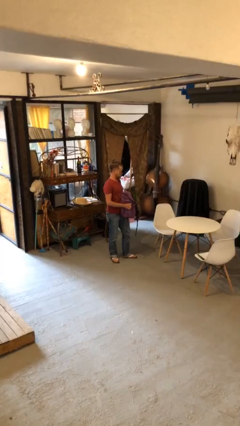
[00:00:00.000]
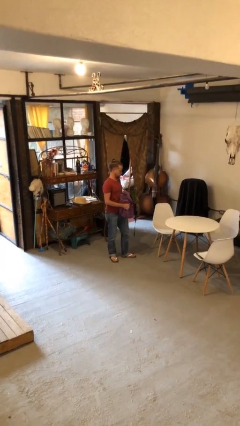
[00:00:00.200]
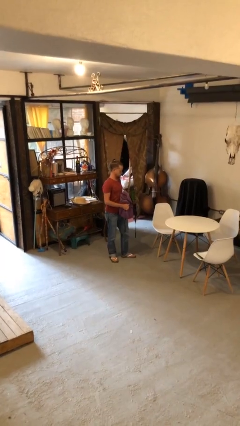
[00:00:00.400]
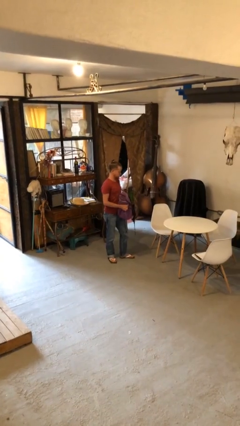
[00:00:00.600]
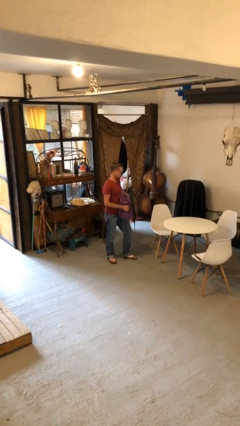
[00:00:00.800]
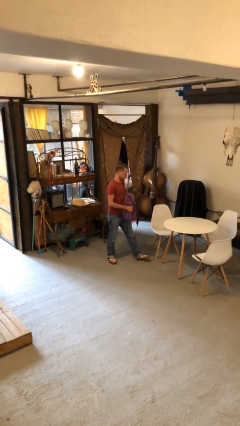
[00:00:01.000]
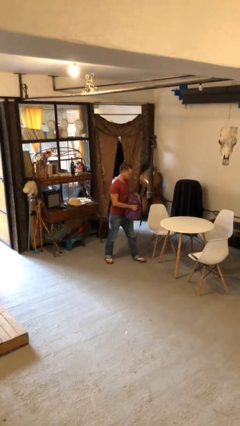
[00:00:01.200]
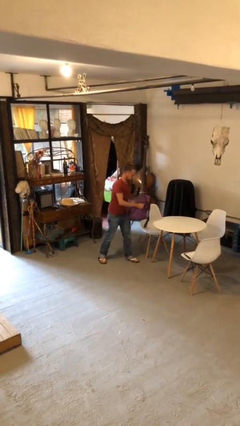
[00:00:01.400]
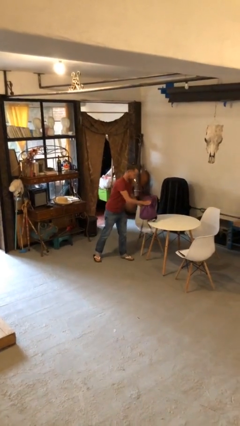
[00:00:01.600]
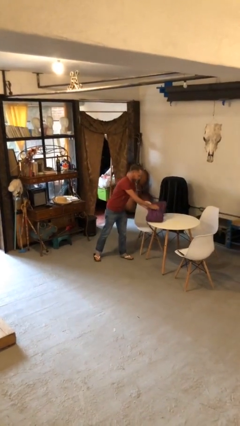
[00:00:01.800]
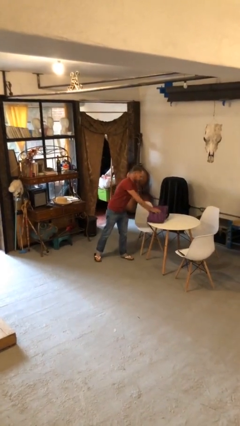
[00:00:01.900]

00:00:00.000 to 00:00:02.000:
person puts down object on table

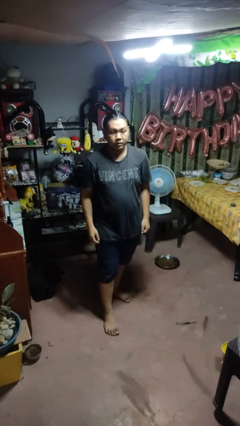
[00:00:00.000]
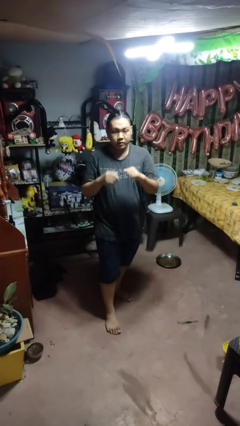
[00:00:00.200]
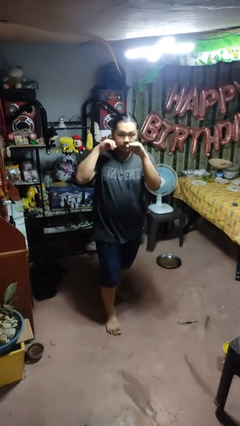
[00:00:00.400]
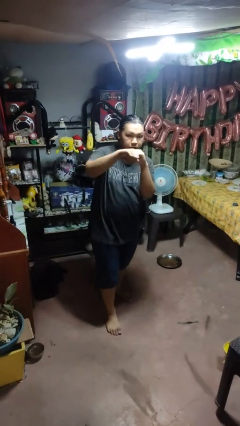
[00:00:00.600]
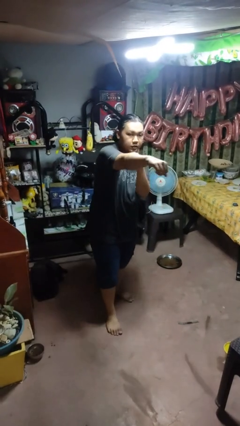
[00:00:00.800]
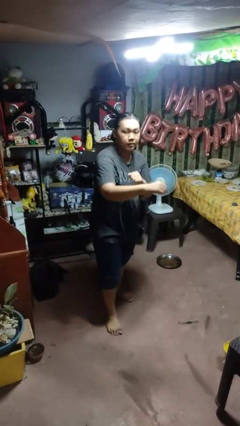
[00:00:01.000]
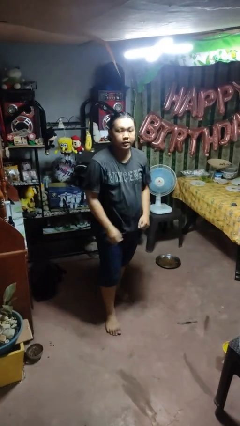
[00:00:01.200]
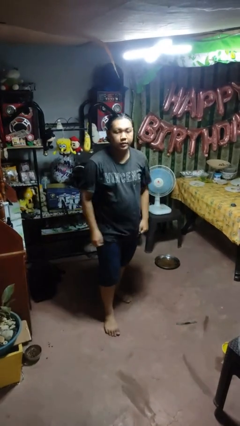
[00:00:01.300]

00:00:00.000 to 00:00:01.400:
person punches

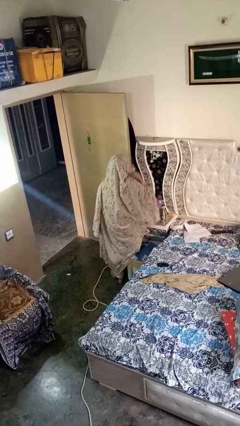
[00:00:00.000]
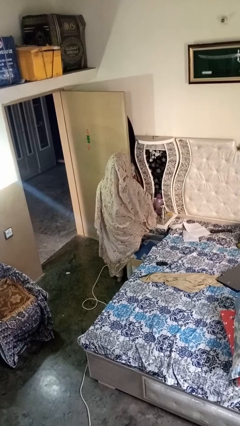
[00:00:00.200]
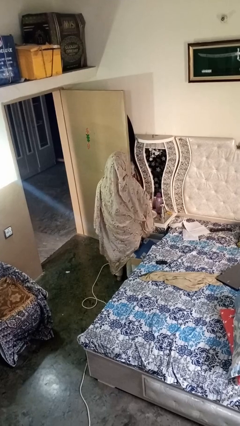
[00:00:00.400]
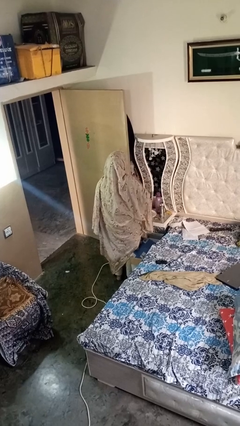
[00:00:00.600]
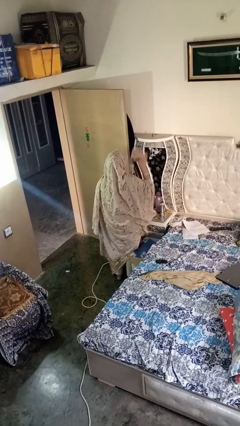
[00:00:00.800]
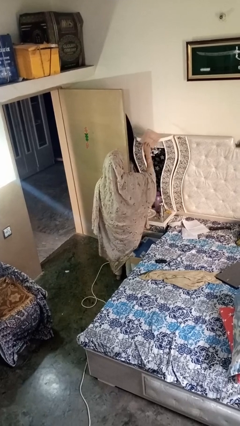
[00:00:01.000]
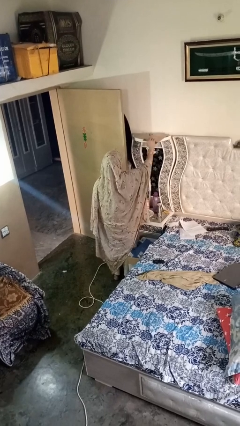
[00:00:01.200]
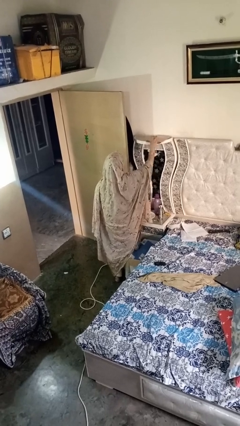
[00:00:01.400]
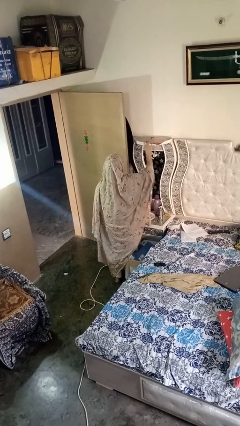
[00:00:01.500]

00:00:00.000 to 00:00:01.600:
person puts down object on shelf

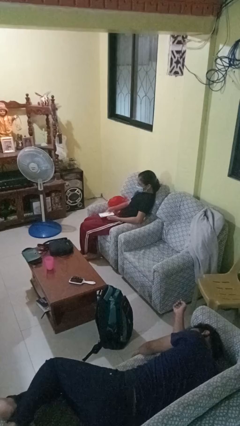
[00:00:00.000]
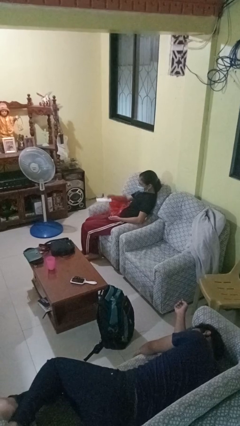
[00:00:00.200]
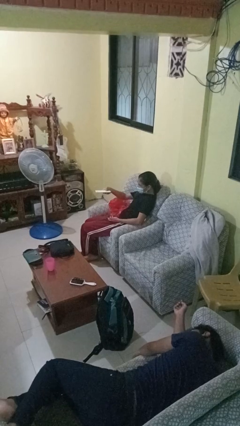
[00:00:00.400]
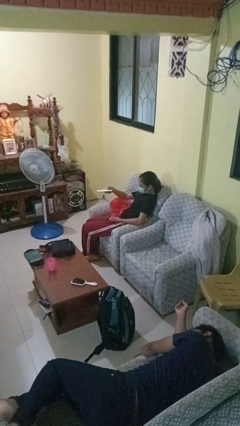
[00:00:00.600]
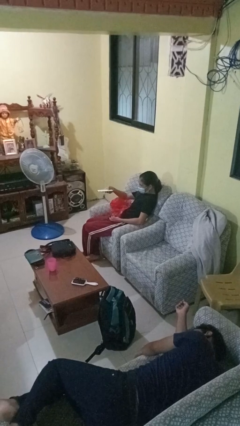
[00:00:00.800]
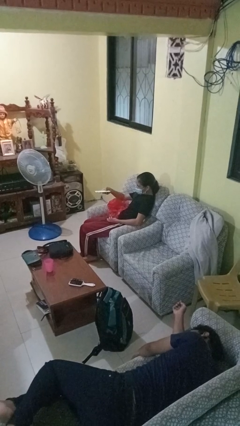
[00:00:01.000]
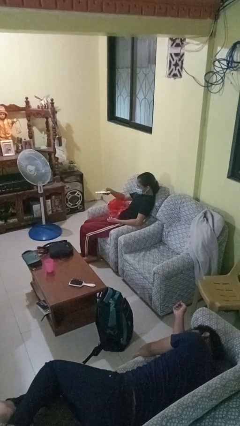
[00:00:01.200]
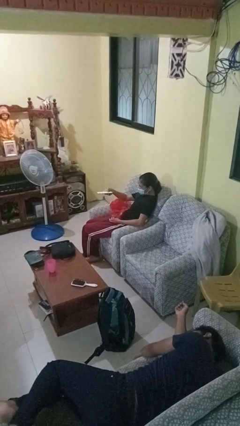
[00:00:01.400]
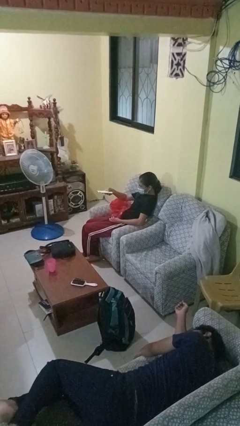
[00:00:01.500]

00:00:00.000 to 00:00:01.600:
person uses television remote

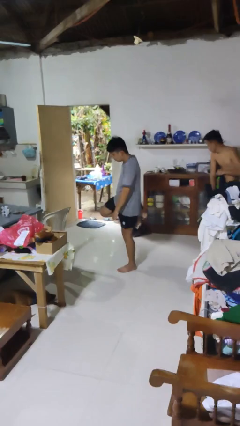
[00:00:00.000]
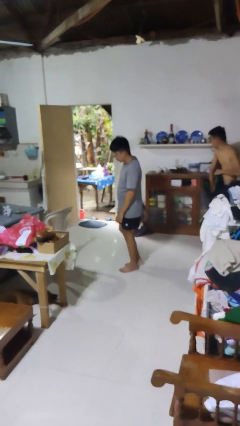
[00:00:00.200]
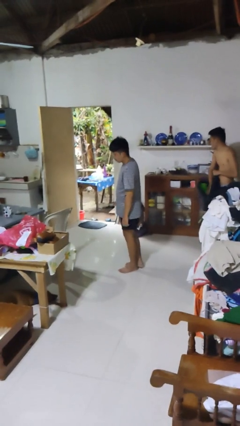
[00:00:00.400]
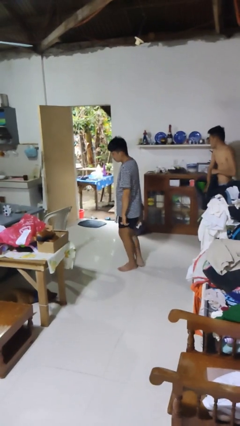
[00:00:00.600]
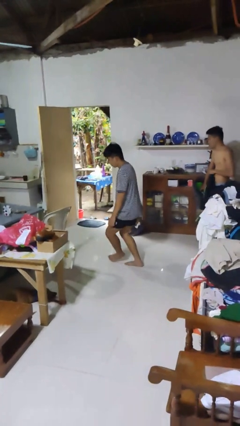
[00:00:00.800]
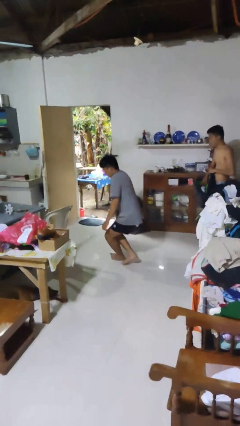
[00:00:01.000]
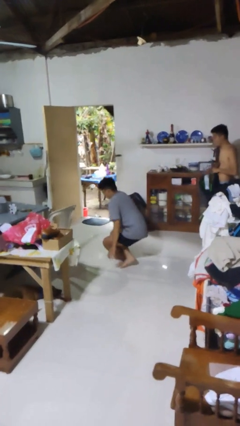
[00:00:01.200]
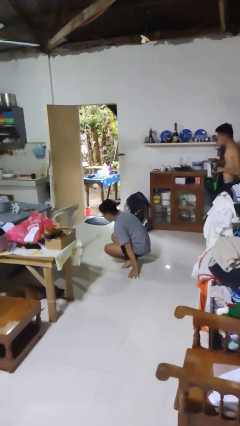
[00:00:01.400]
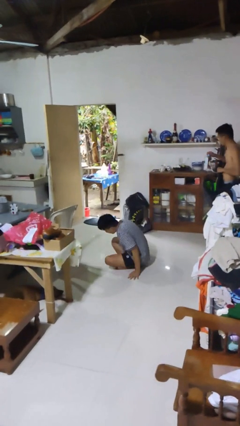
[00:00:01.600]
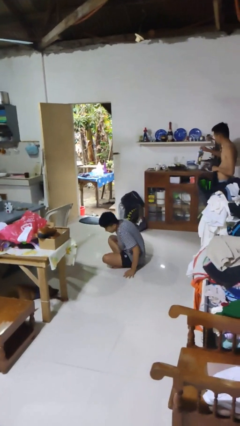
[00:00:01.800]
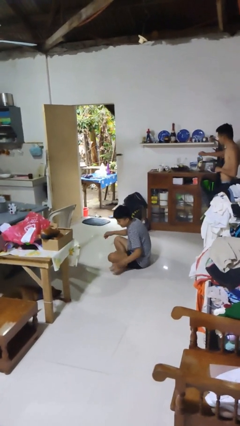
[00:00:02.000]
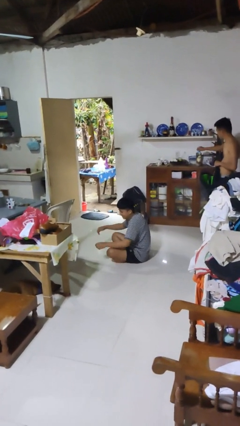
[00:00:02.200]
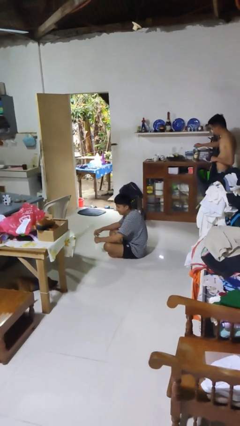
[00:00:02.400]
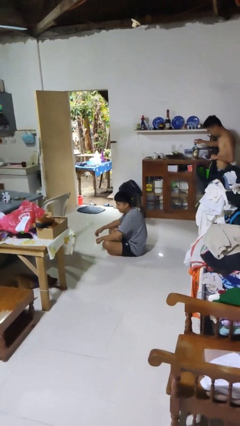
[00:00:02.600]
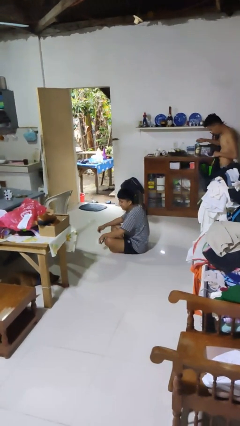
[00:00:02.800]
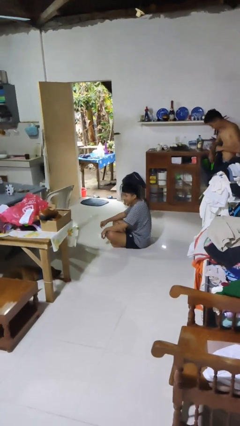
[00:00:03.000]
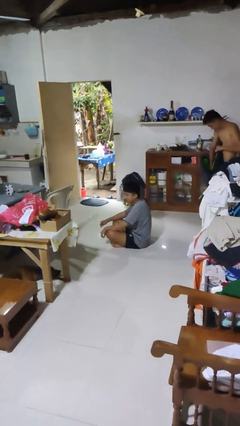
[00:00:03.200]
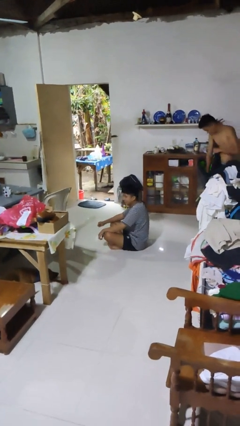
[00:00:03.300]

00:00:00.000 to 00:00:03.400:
person sits crisscross

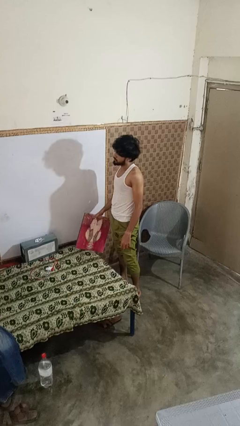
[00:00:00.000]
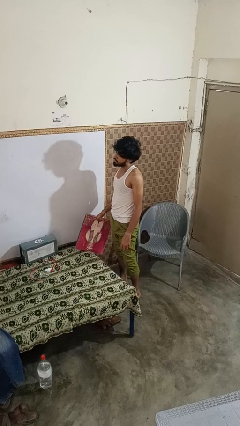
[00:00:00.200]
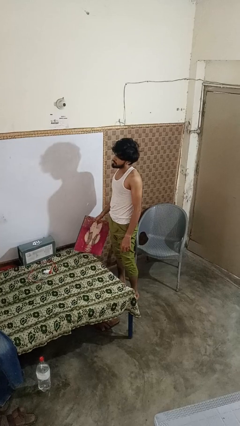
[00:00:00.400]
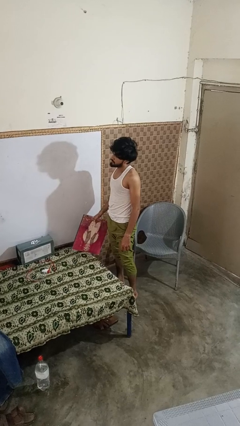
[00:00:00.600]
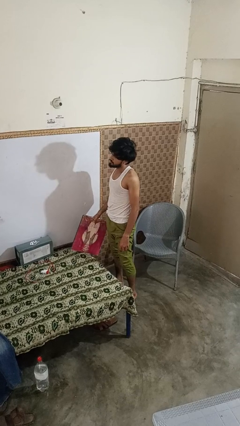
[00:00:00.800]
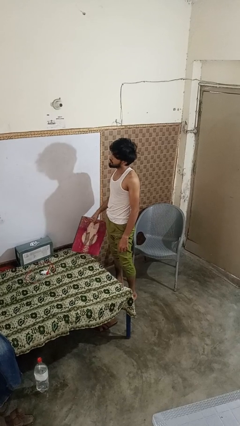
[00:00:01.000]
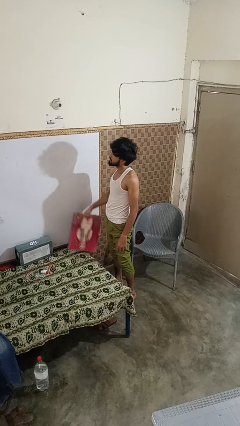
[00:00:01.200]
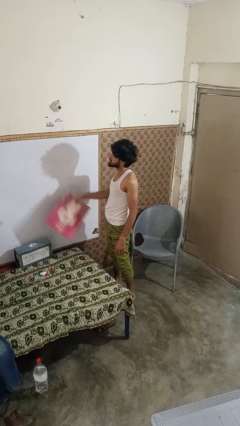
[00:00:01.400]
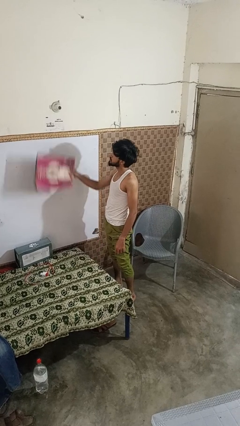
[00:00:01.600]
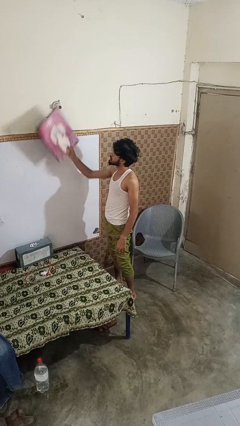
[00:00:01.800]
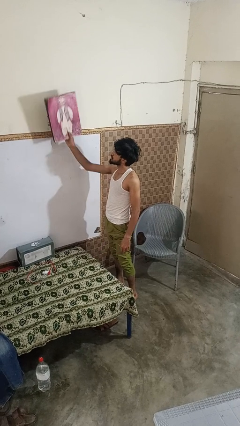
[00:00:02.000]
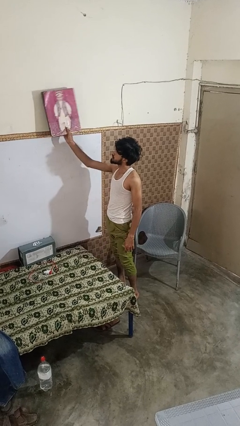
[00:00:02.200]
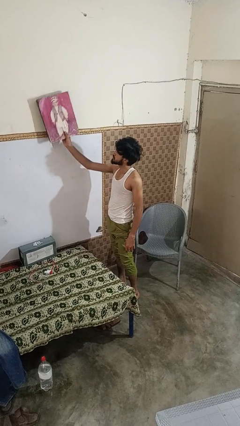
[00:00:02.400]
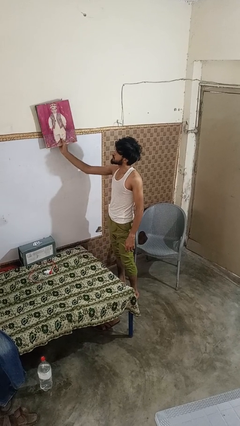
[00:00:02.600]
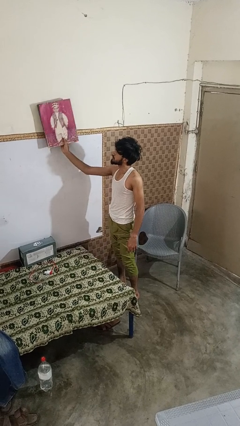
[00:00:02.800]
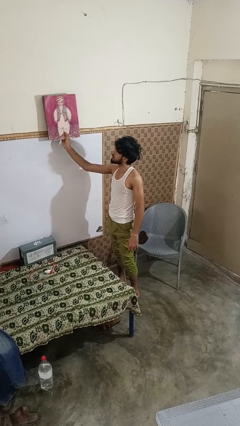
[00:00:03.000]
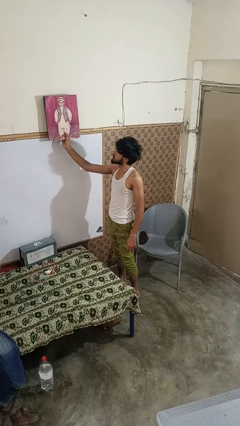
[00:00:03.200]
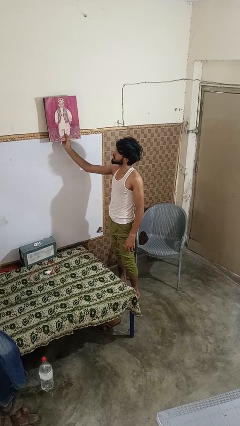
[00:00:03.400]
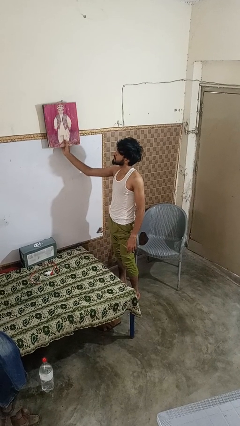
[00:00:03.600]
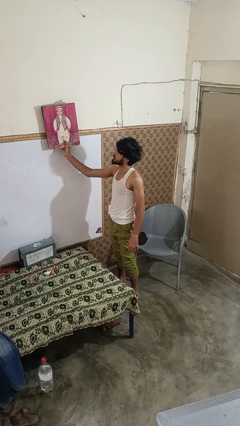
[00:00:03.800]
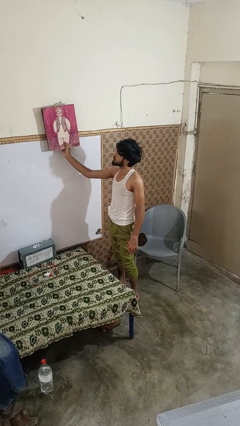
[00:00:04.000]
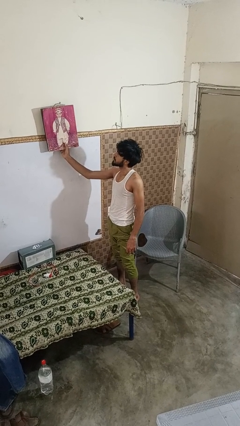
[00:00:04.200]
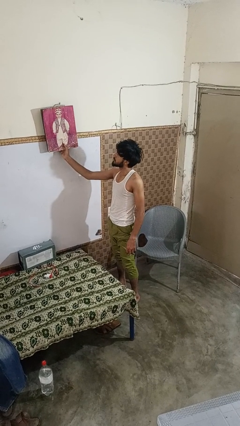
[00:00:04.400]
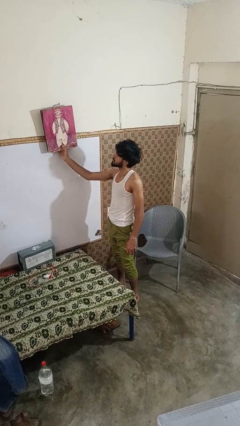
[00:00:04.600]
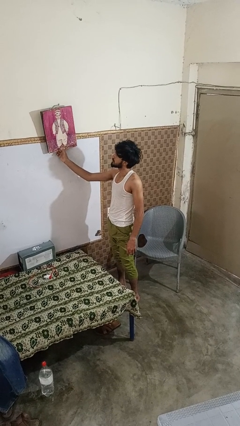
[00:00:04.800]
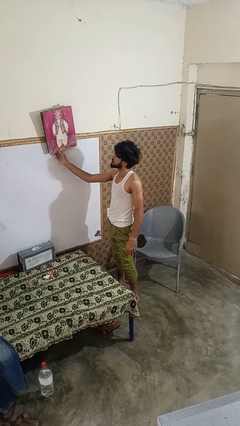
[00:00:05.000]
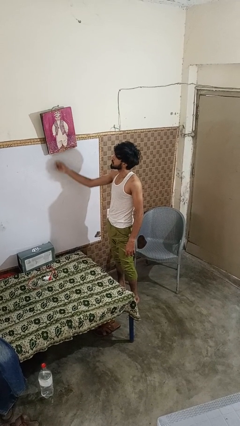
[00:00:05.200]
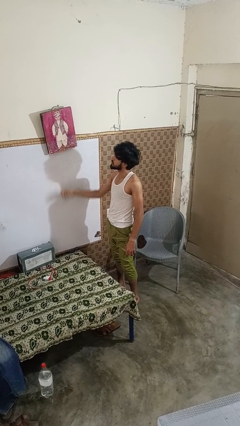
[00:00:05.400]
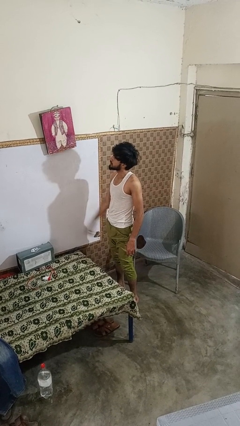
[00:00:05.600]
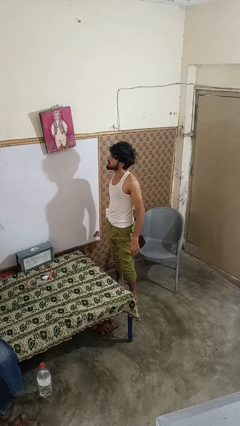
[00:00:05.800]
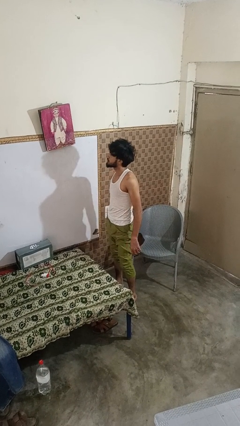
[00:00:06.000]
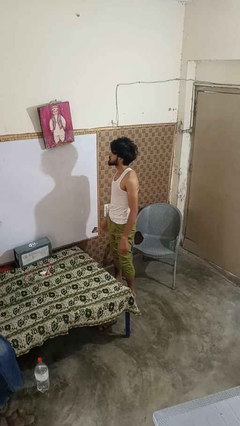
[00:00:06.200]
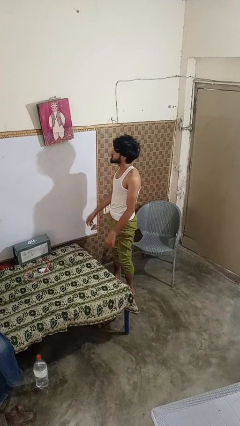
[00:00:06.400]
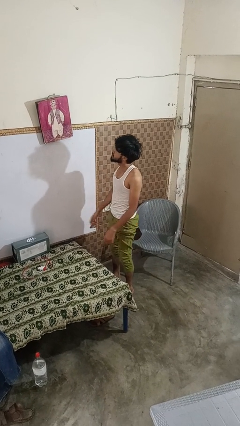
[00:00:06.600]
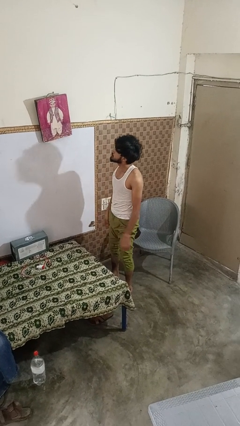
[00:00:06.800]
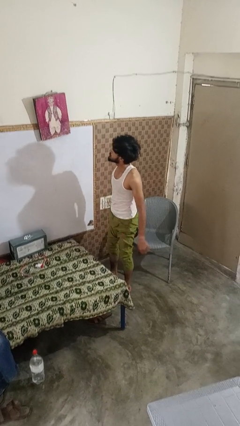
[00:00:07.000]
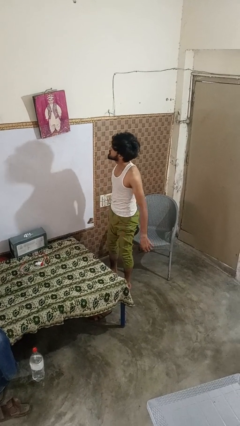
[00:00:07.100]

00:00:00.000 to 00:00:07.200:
person puts up picture frame
